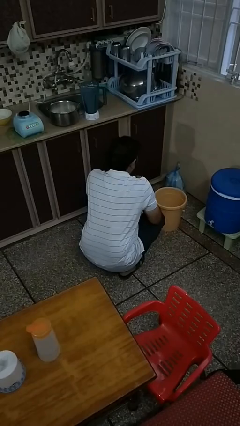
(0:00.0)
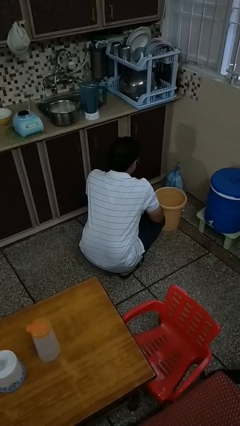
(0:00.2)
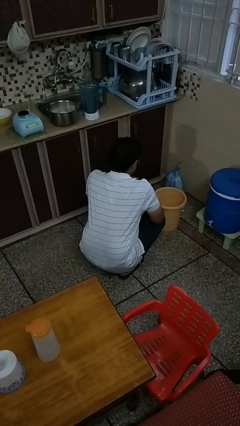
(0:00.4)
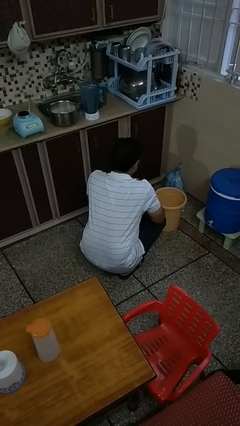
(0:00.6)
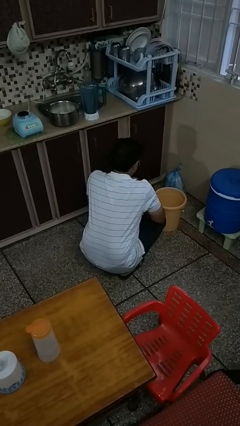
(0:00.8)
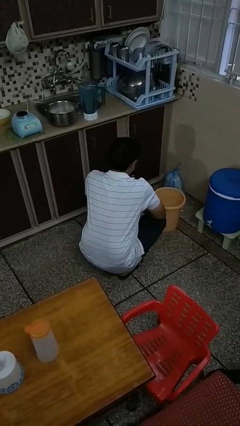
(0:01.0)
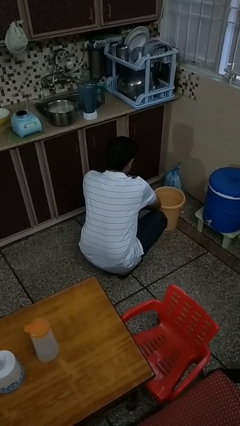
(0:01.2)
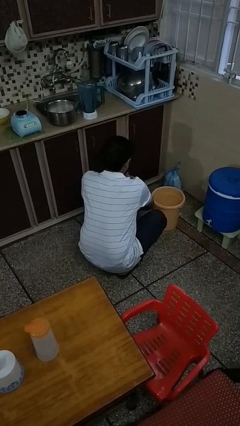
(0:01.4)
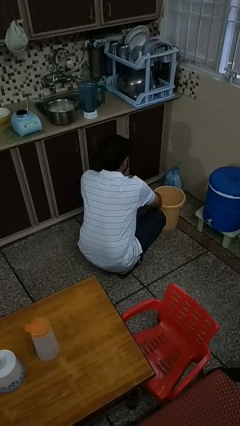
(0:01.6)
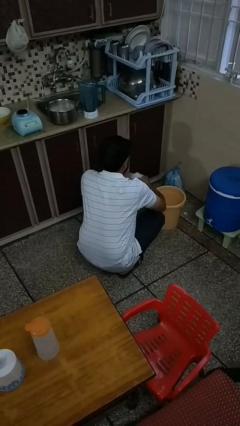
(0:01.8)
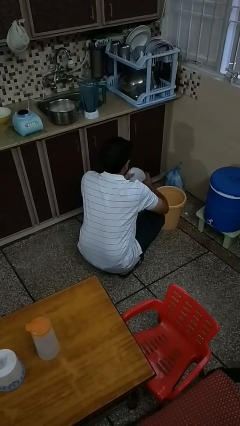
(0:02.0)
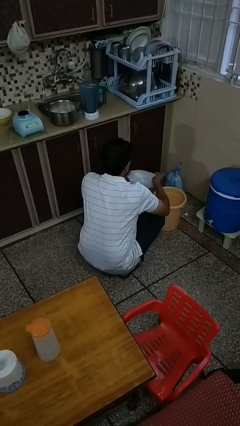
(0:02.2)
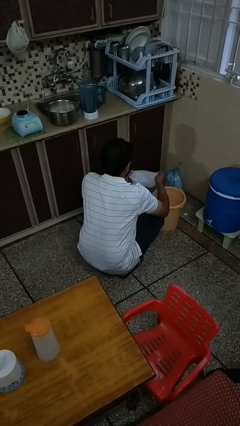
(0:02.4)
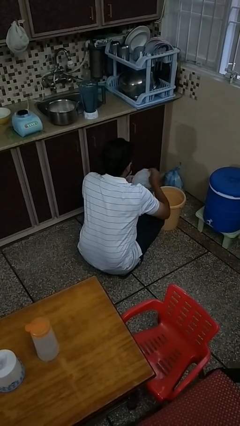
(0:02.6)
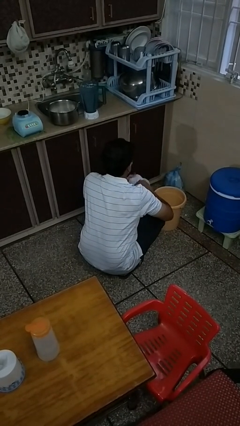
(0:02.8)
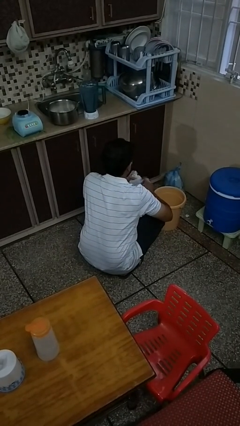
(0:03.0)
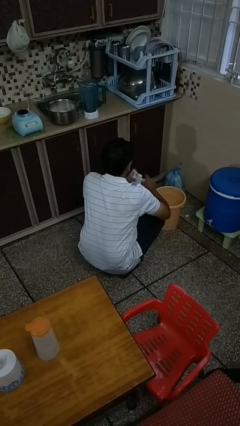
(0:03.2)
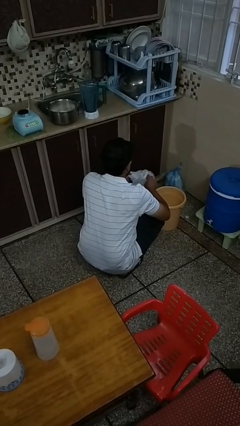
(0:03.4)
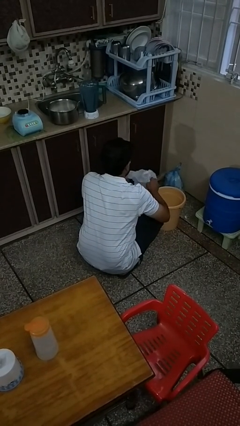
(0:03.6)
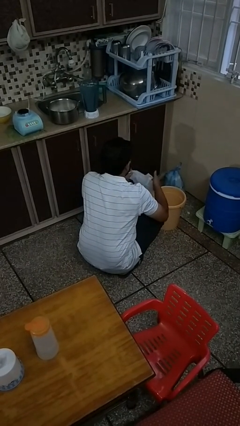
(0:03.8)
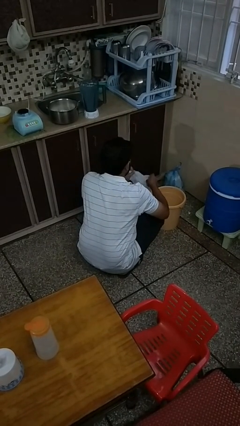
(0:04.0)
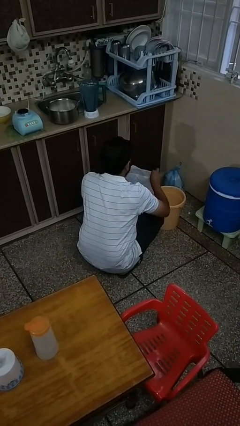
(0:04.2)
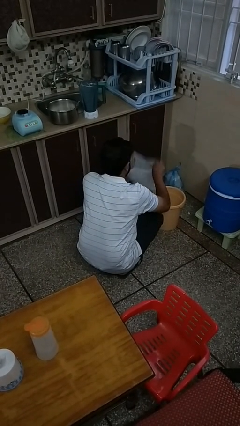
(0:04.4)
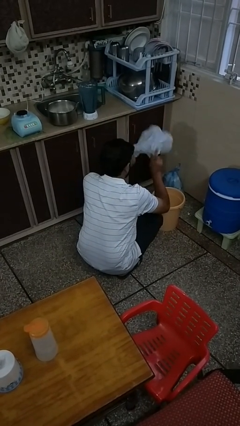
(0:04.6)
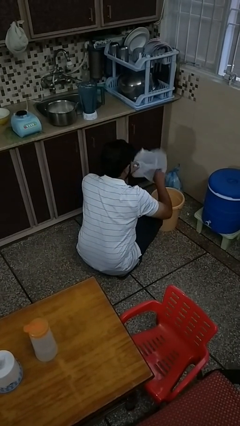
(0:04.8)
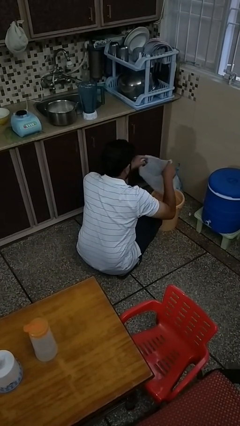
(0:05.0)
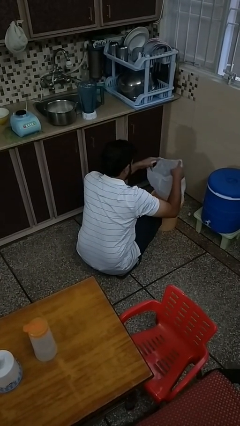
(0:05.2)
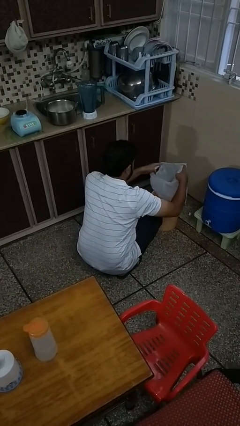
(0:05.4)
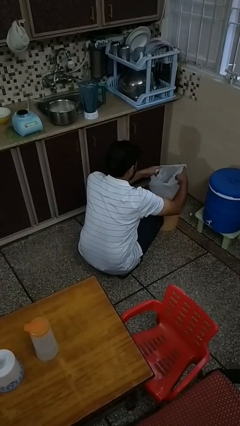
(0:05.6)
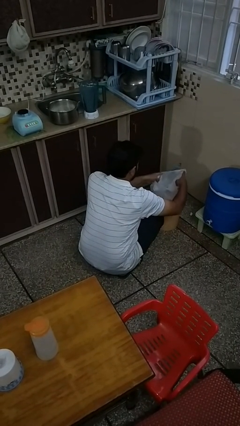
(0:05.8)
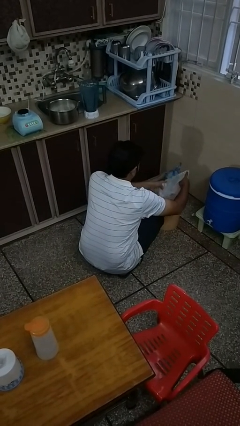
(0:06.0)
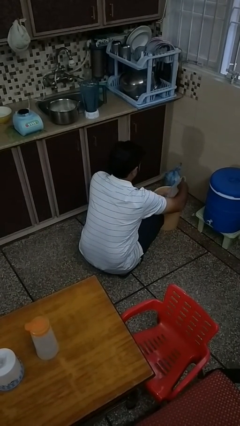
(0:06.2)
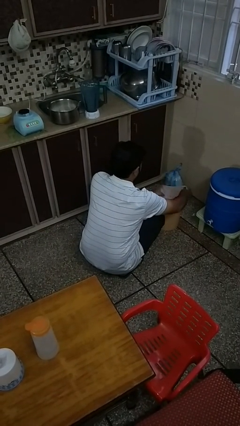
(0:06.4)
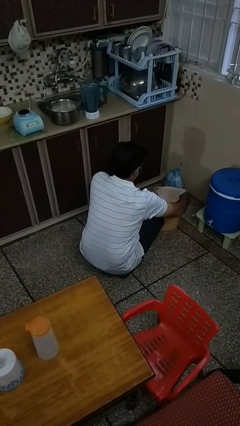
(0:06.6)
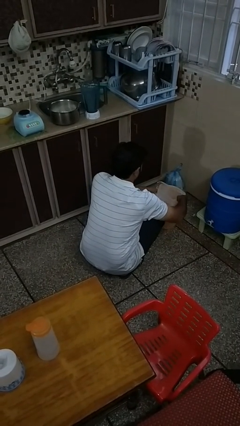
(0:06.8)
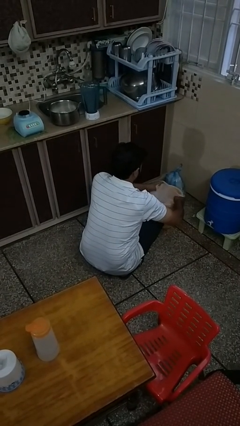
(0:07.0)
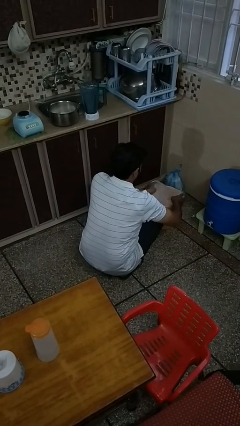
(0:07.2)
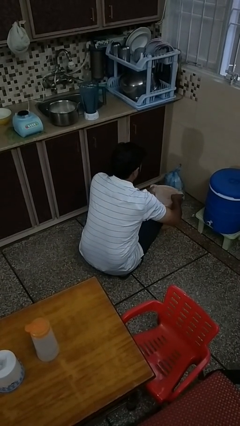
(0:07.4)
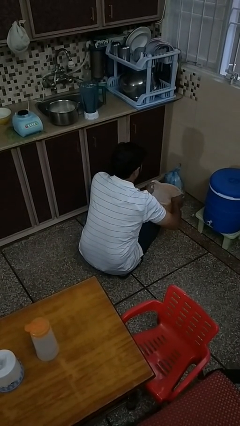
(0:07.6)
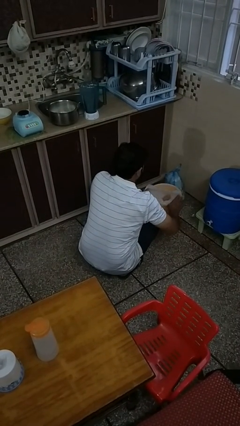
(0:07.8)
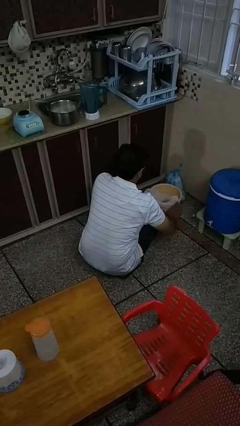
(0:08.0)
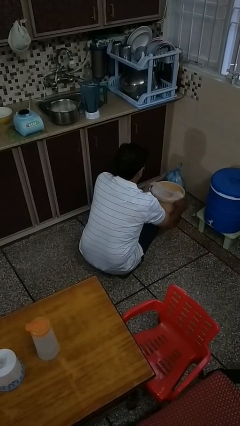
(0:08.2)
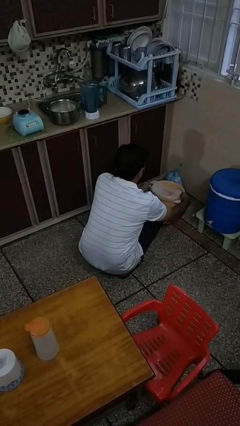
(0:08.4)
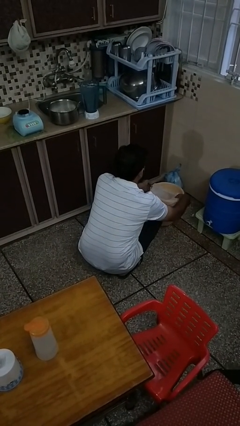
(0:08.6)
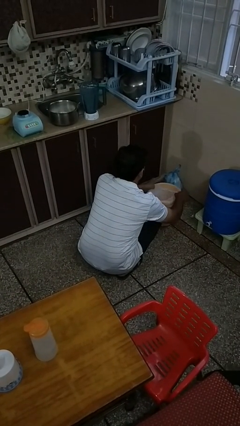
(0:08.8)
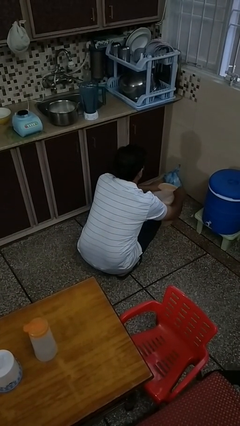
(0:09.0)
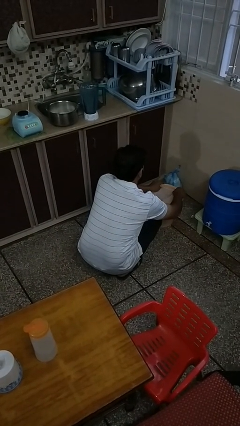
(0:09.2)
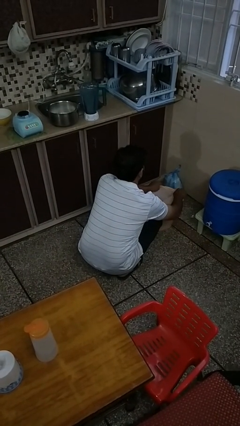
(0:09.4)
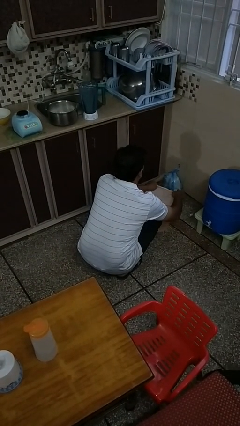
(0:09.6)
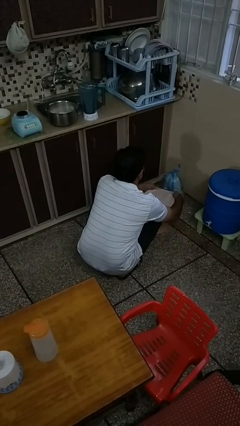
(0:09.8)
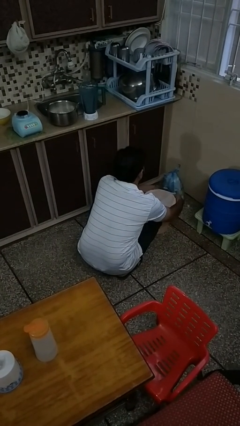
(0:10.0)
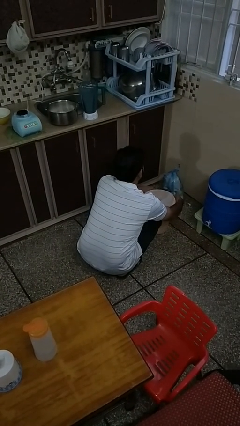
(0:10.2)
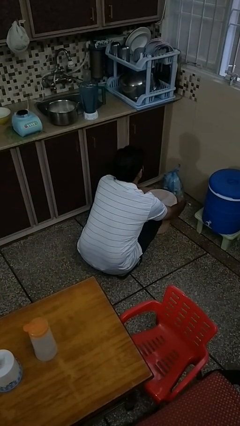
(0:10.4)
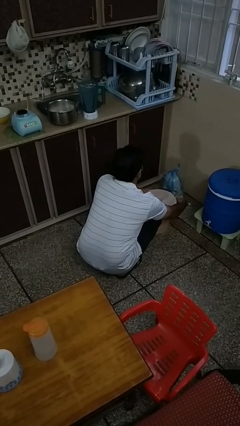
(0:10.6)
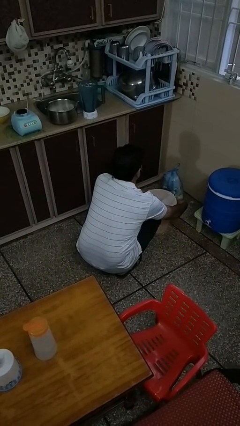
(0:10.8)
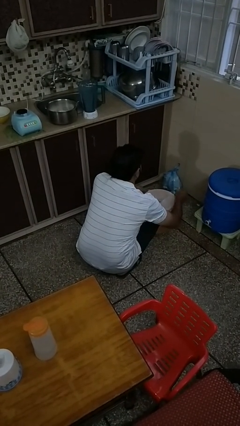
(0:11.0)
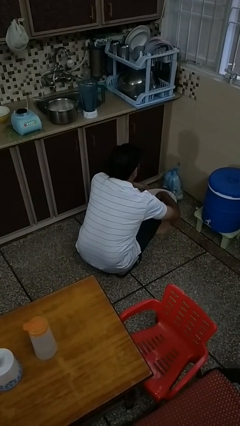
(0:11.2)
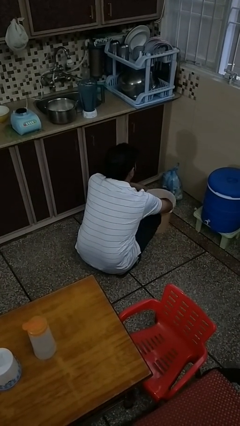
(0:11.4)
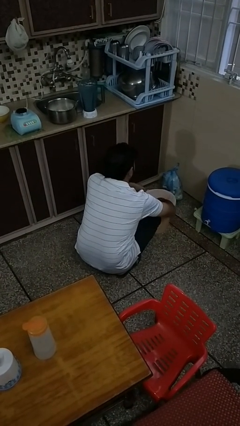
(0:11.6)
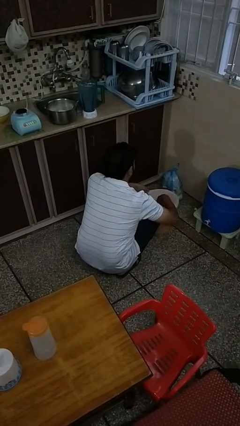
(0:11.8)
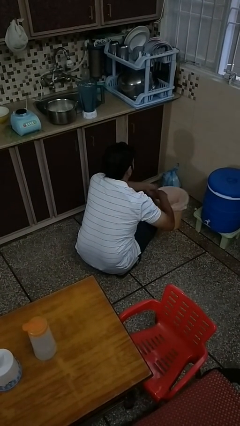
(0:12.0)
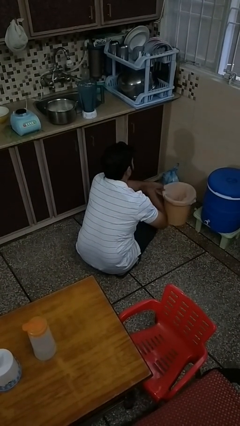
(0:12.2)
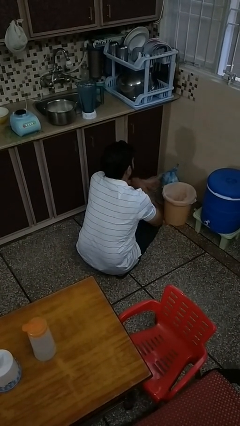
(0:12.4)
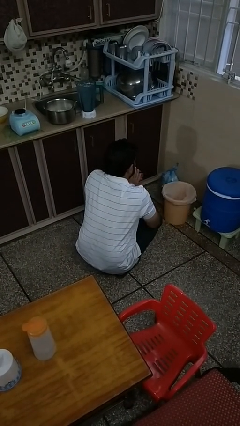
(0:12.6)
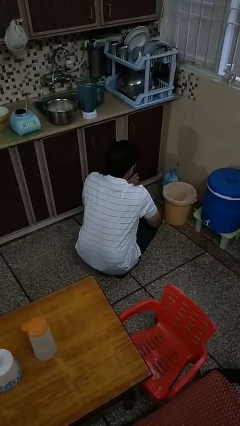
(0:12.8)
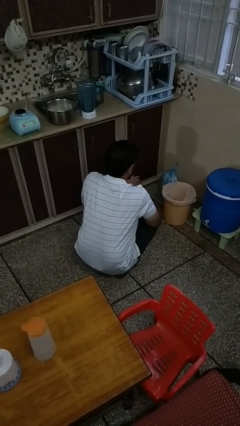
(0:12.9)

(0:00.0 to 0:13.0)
person inserts trashbag into trashcan

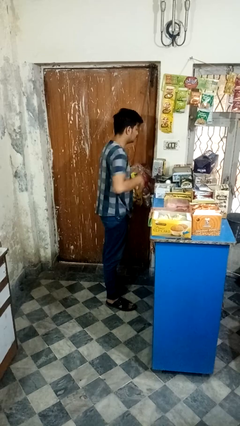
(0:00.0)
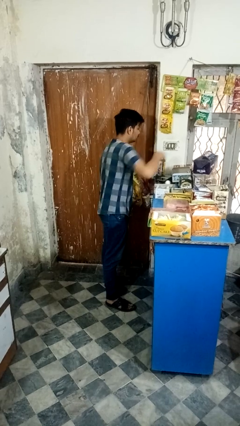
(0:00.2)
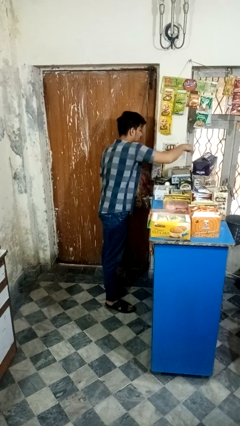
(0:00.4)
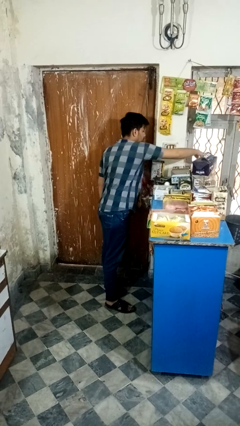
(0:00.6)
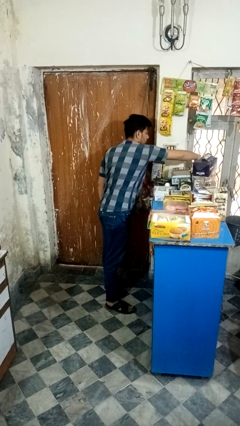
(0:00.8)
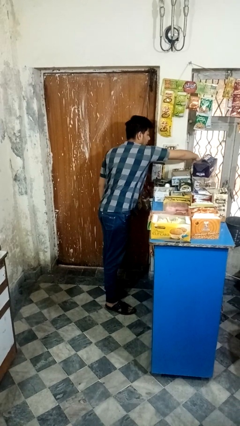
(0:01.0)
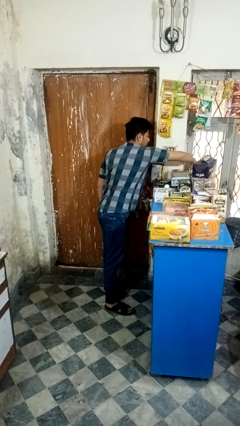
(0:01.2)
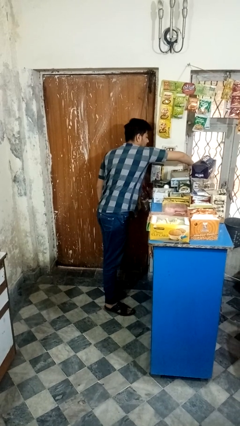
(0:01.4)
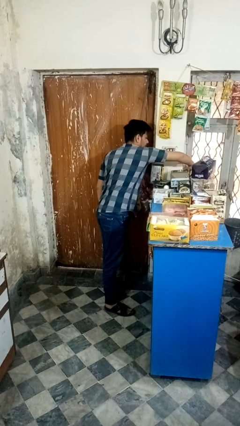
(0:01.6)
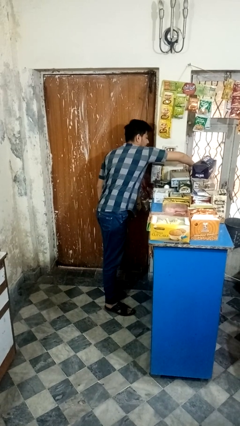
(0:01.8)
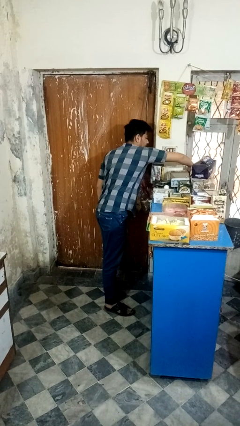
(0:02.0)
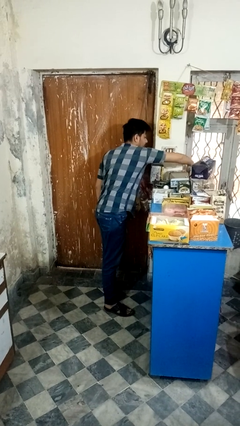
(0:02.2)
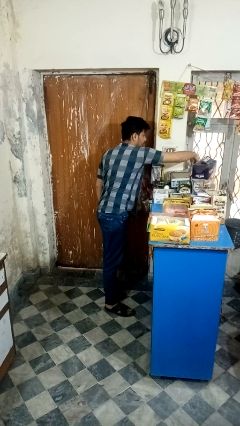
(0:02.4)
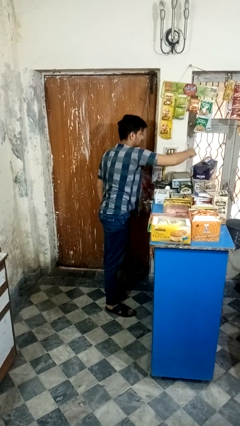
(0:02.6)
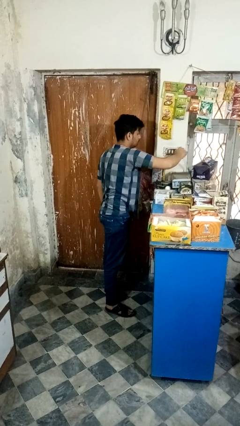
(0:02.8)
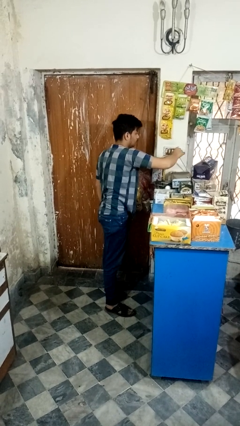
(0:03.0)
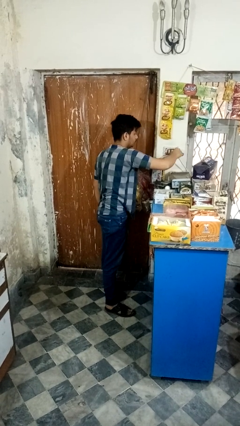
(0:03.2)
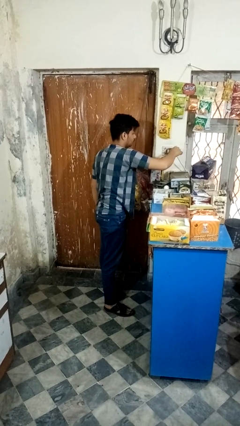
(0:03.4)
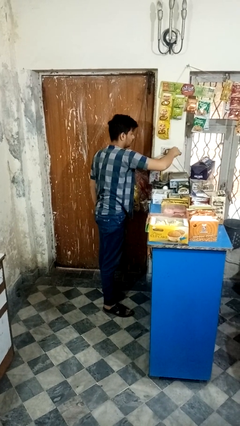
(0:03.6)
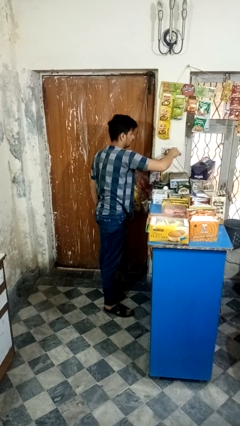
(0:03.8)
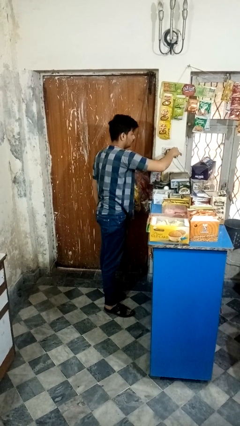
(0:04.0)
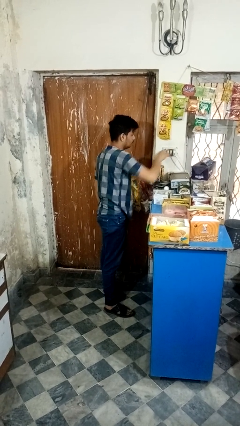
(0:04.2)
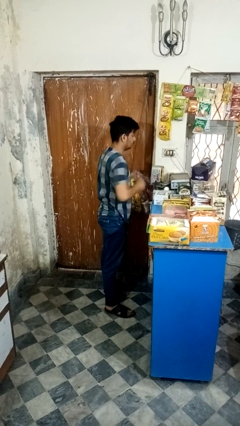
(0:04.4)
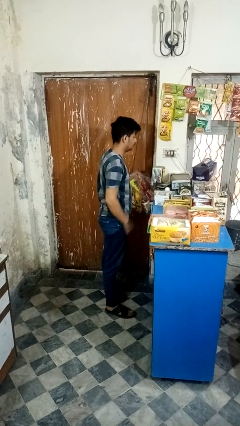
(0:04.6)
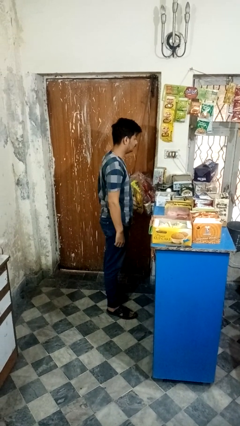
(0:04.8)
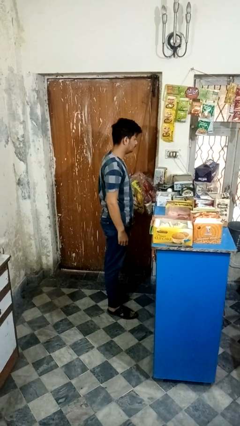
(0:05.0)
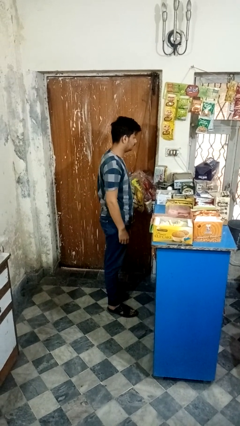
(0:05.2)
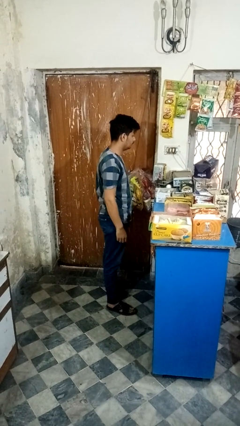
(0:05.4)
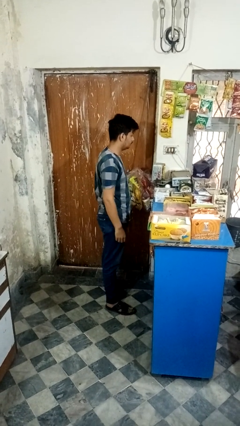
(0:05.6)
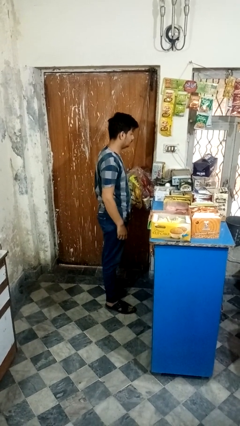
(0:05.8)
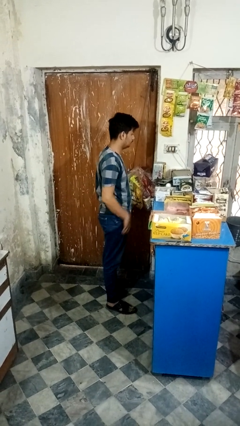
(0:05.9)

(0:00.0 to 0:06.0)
person plugs into electrical socket
